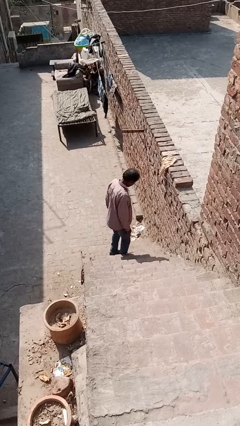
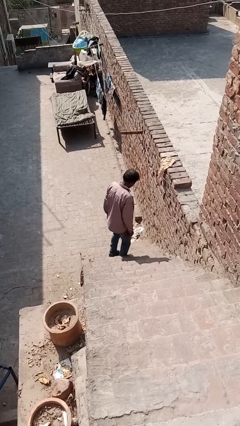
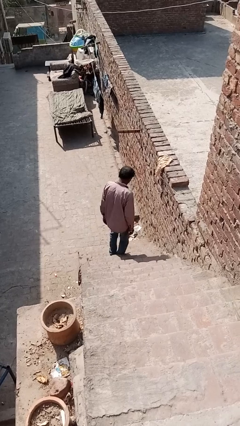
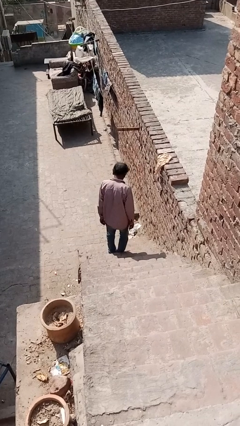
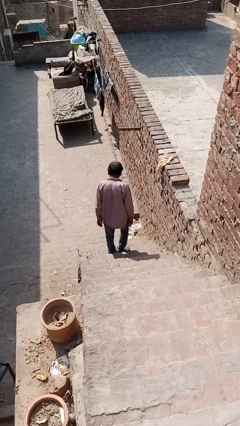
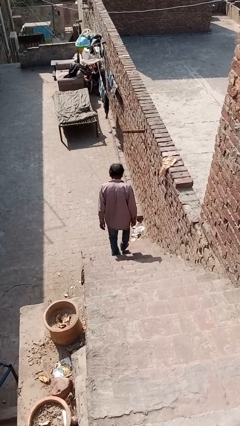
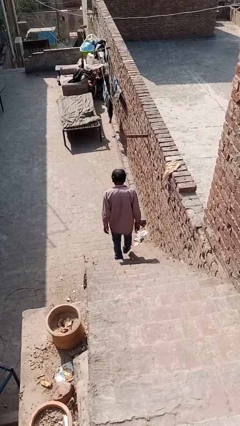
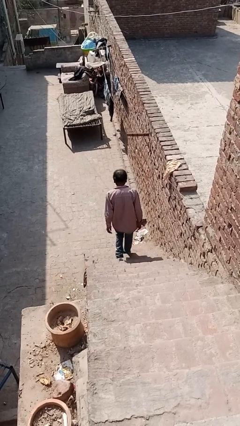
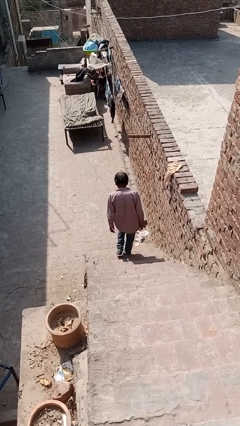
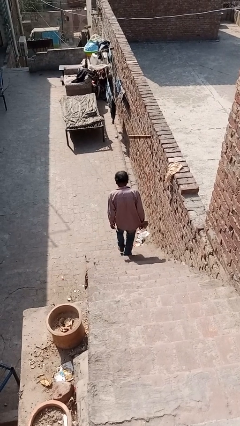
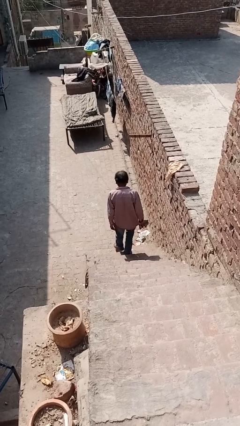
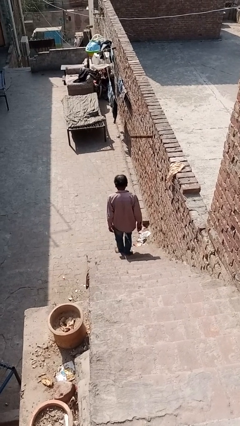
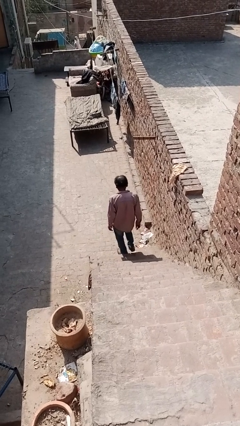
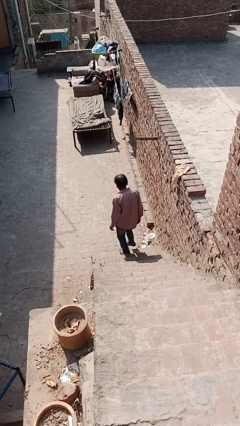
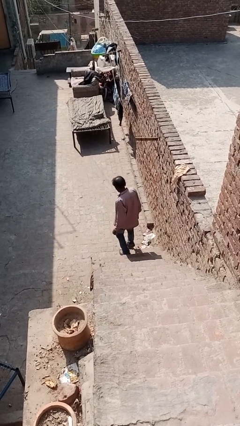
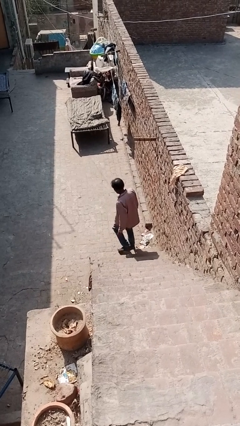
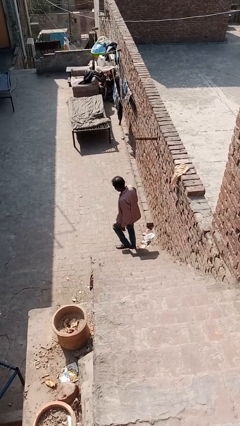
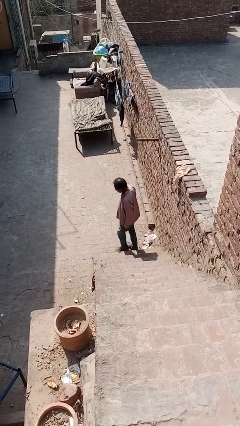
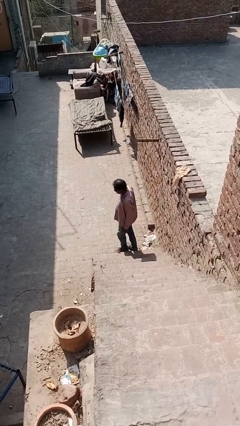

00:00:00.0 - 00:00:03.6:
person climbs down stairs

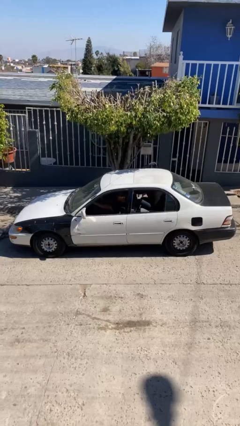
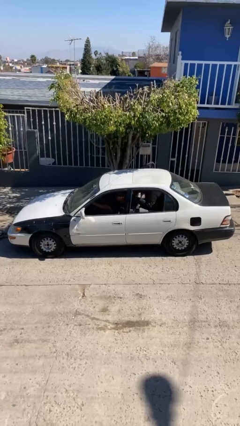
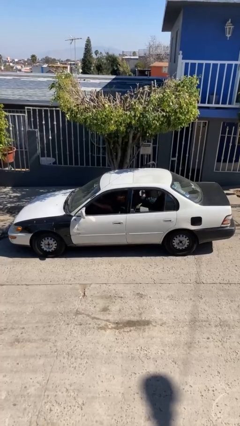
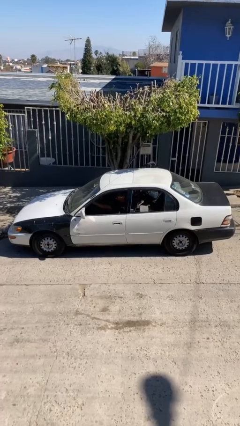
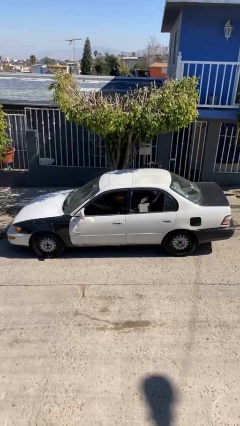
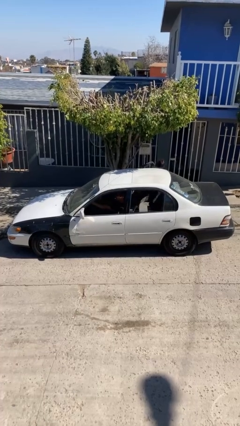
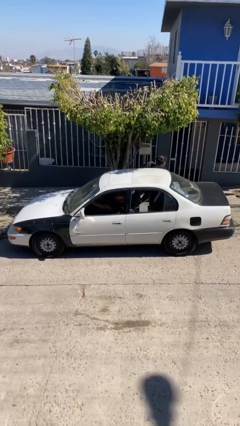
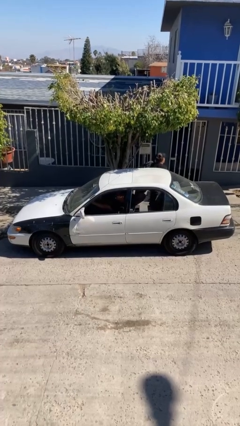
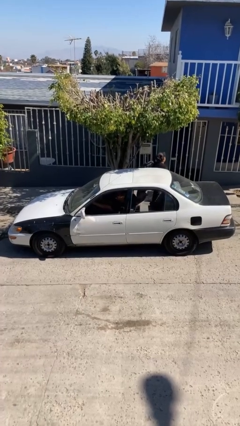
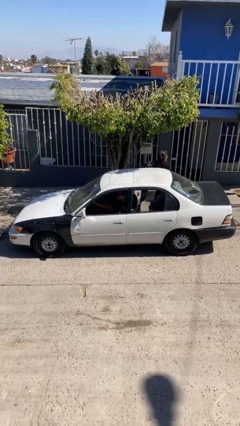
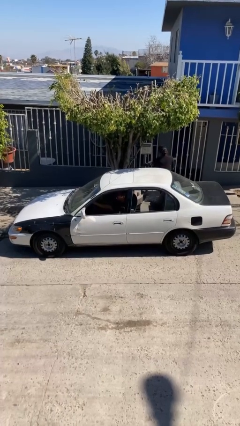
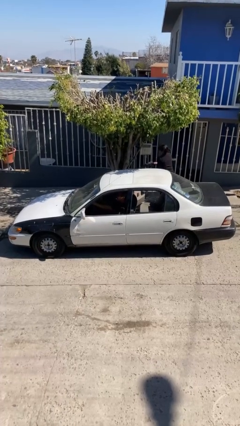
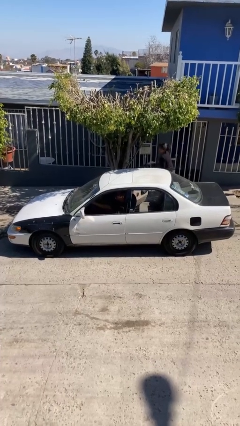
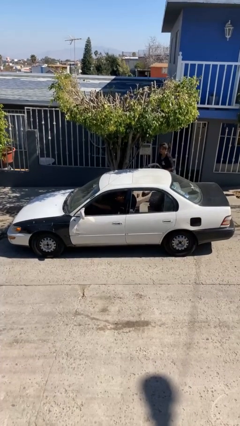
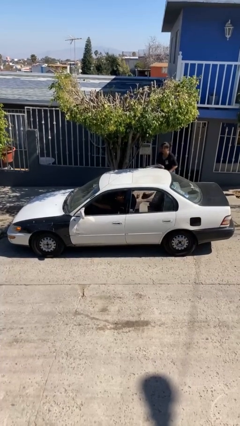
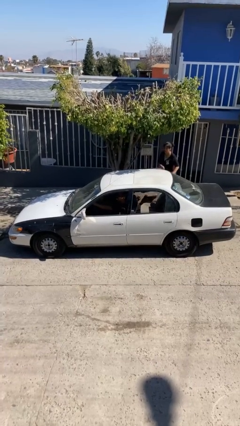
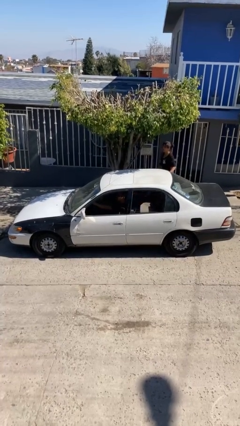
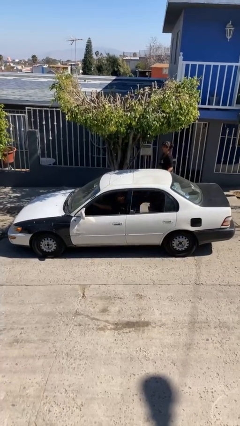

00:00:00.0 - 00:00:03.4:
car drops off person

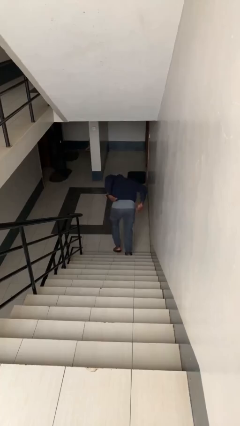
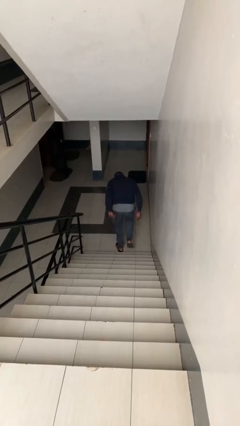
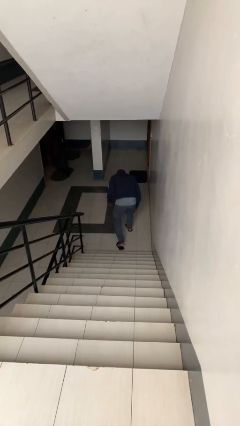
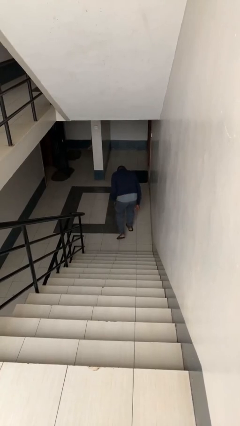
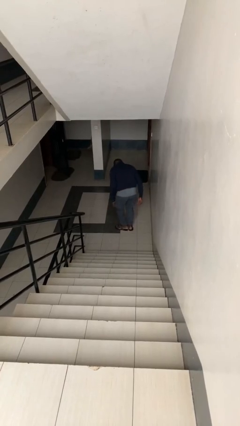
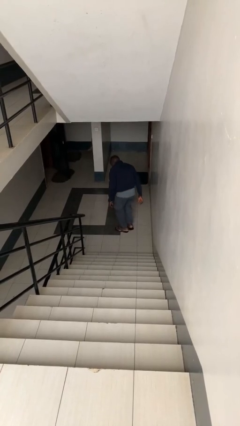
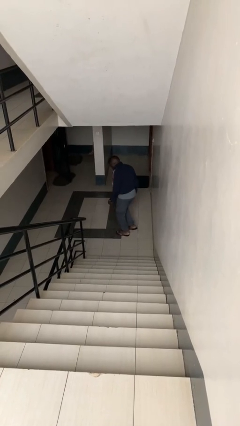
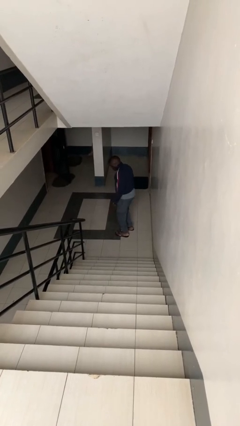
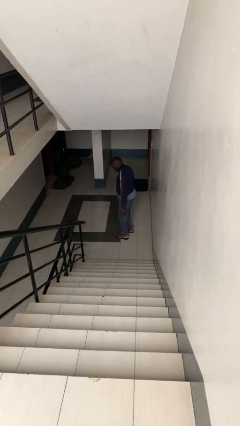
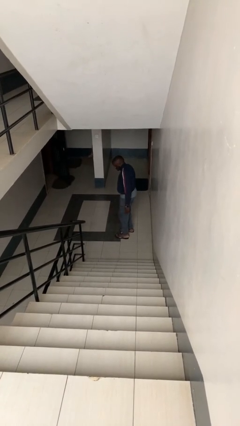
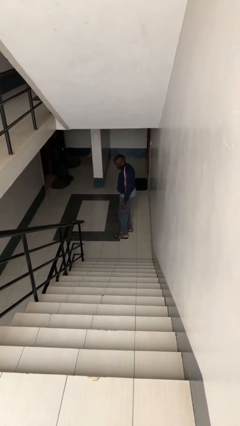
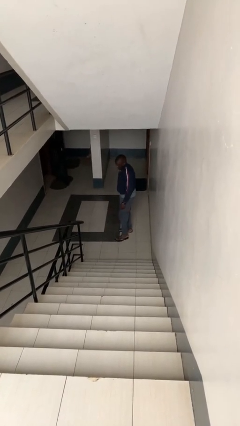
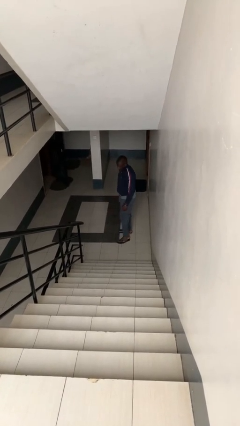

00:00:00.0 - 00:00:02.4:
person trips on stair

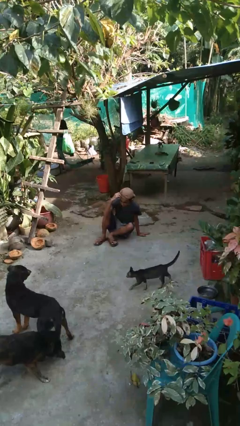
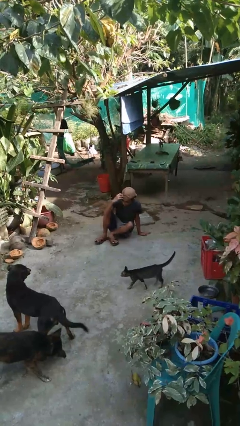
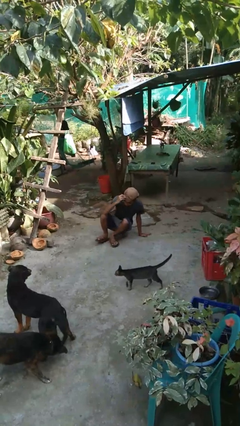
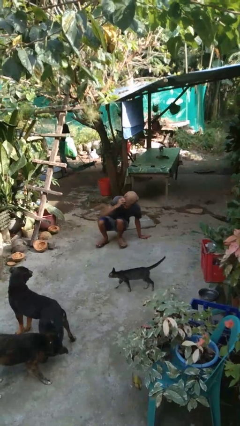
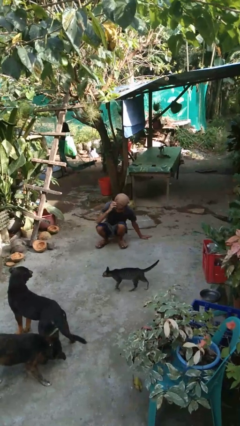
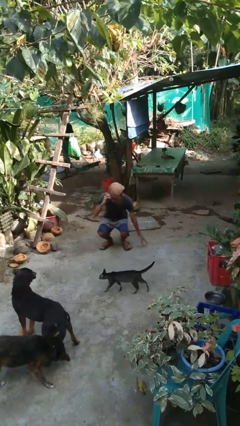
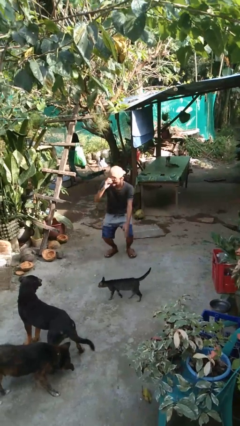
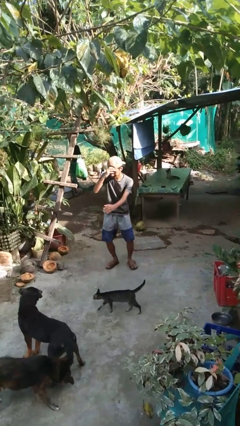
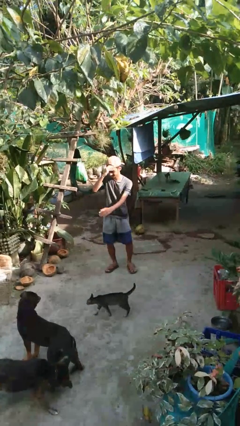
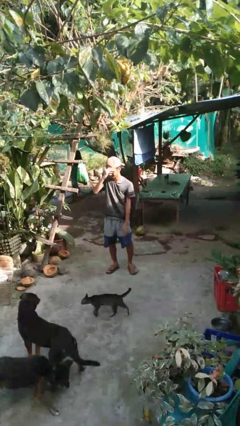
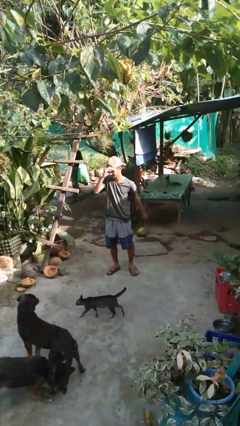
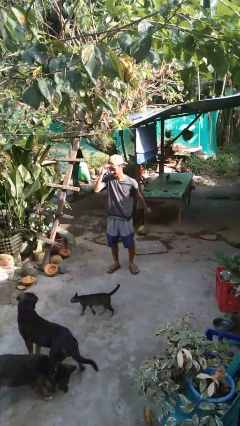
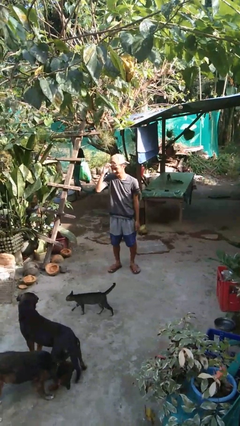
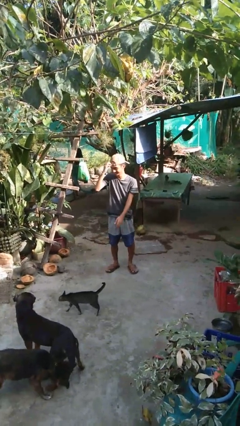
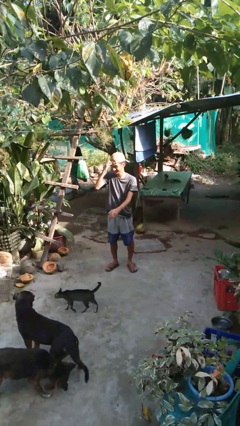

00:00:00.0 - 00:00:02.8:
person stands up from floor

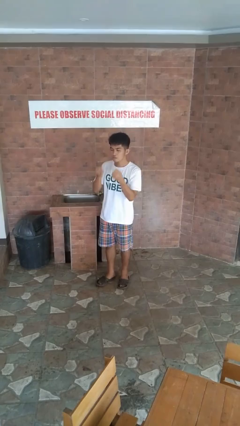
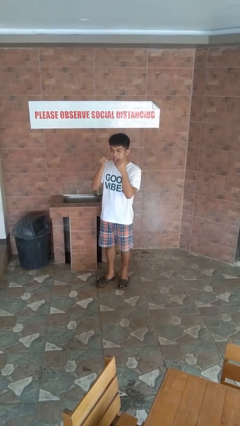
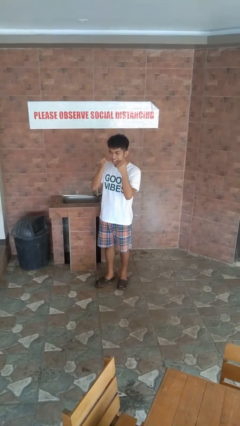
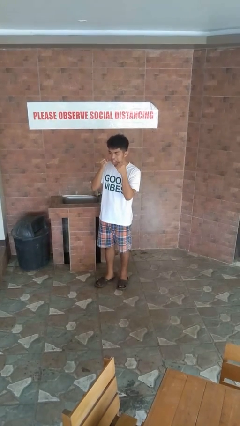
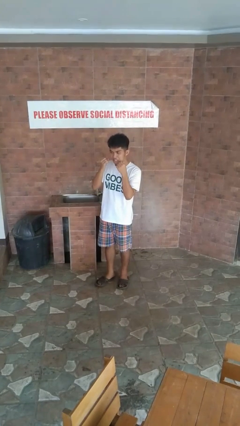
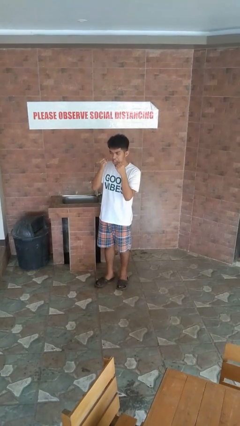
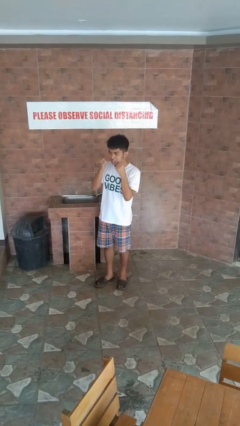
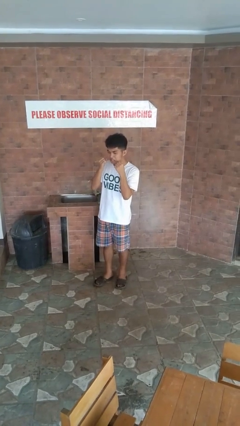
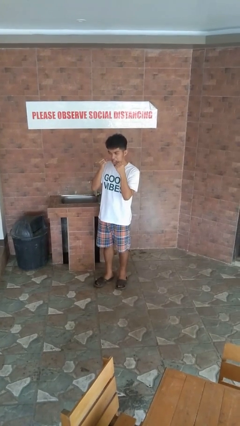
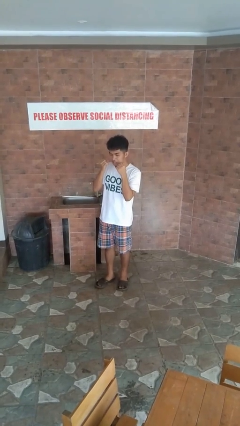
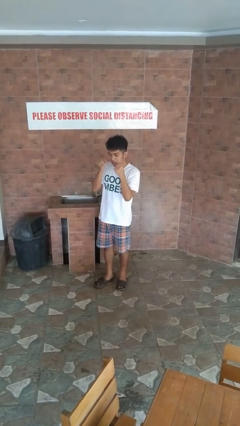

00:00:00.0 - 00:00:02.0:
person flosses

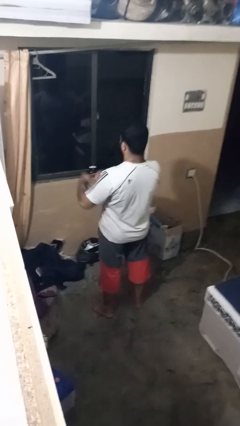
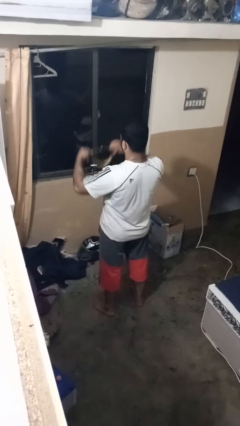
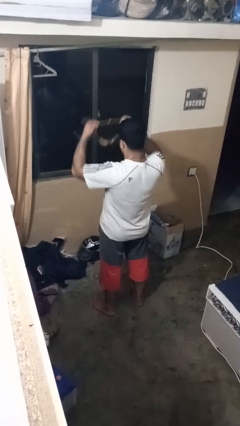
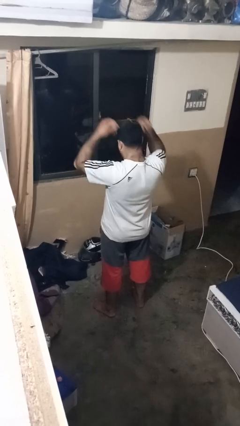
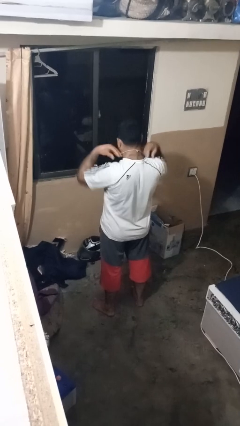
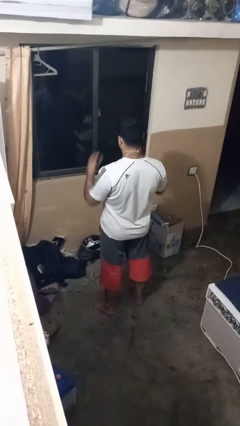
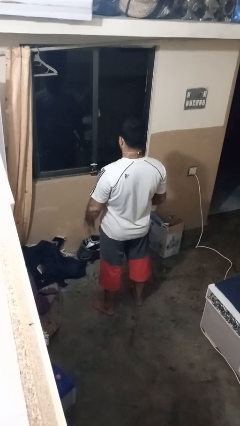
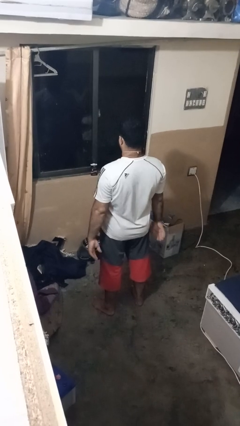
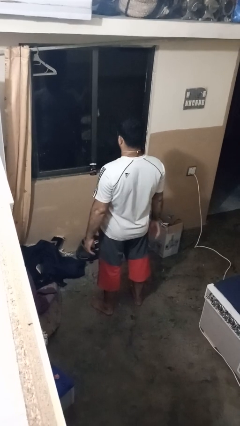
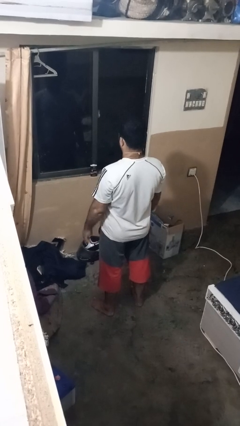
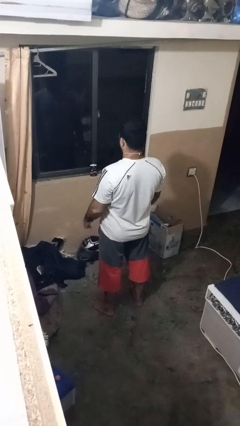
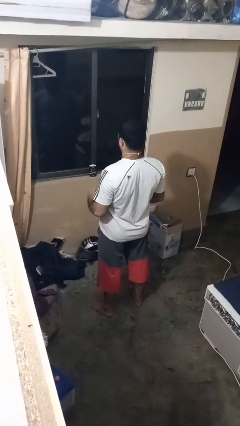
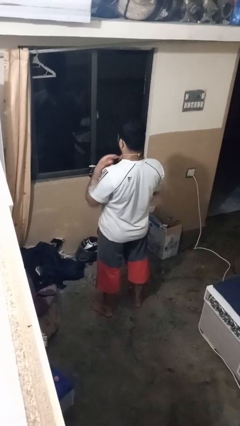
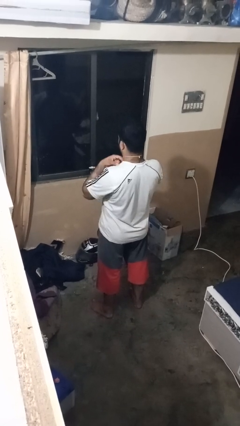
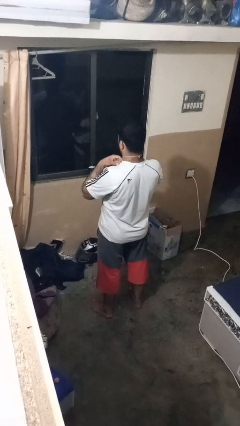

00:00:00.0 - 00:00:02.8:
person puts on necklace

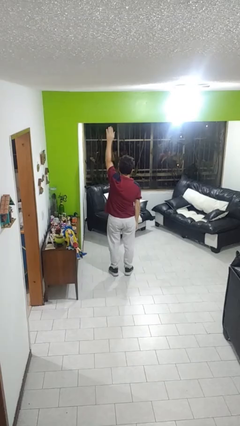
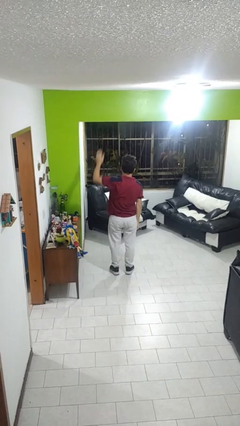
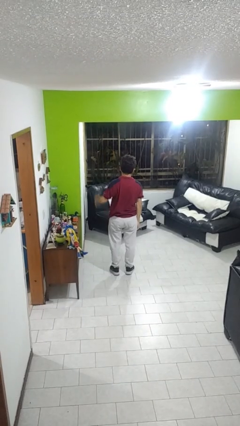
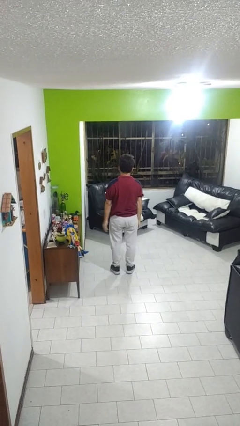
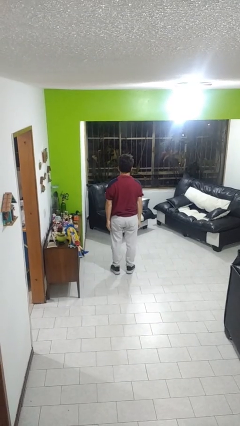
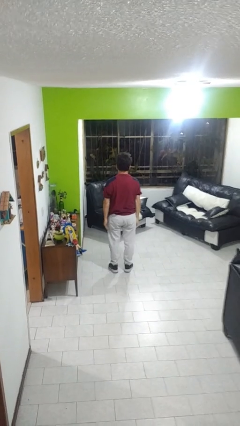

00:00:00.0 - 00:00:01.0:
person gestures lower hand
